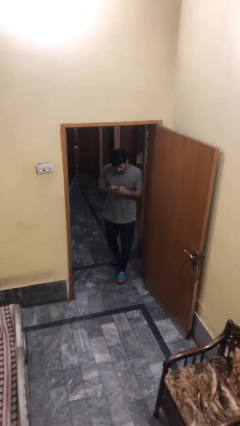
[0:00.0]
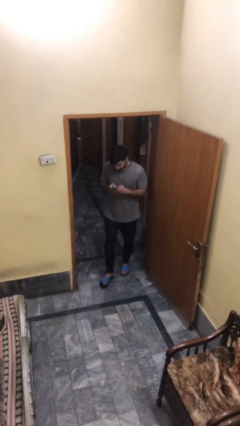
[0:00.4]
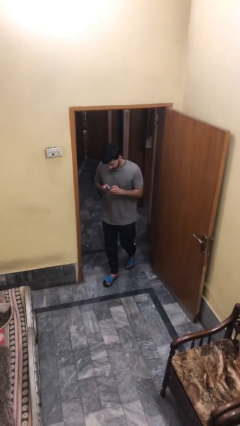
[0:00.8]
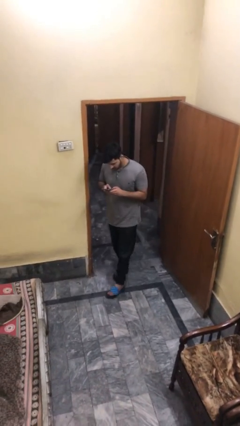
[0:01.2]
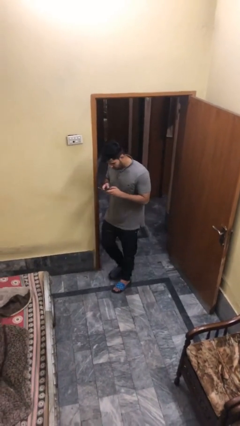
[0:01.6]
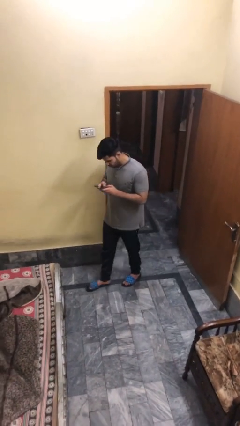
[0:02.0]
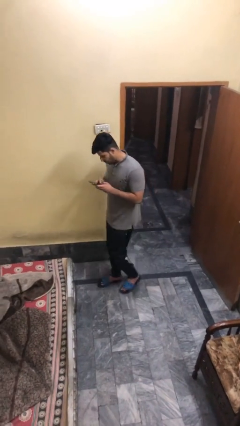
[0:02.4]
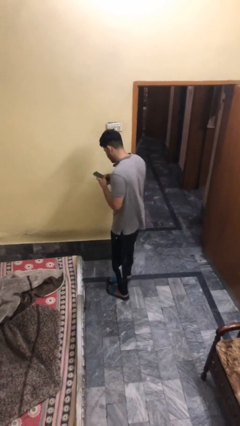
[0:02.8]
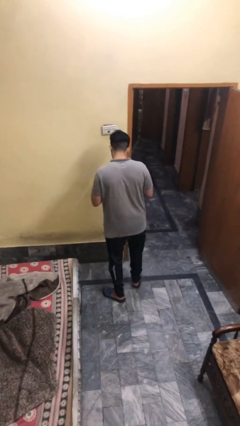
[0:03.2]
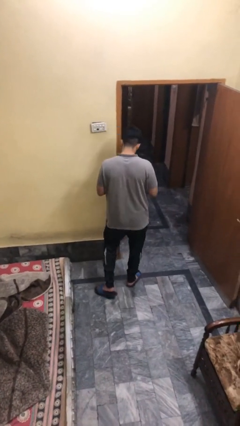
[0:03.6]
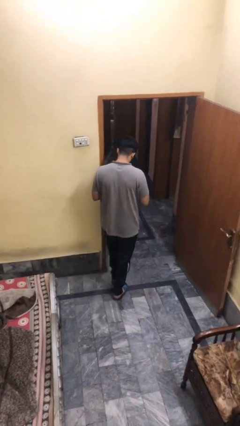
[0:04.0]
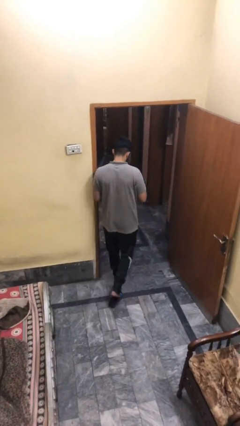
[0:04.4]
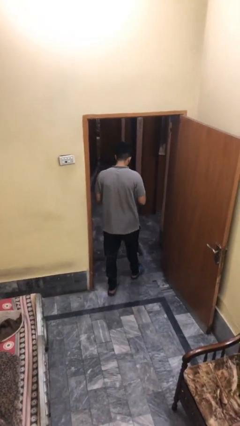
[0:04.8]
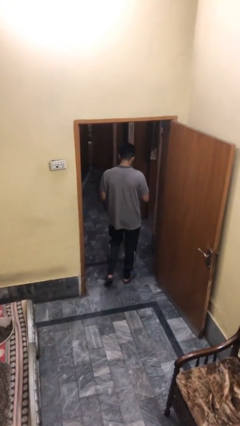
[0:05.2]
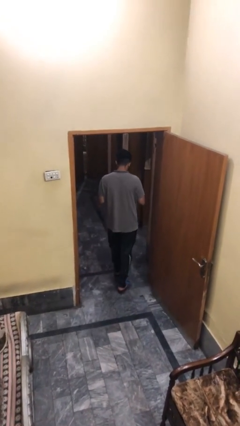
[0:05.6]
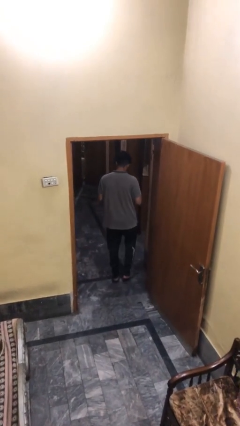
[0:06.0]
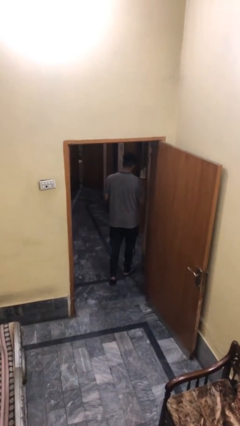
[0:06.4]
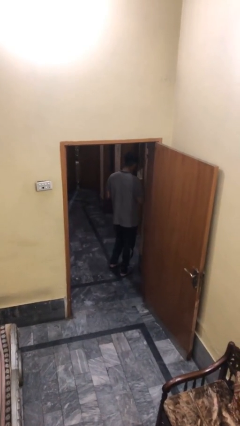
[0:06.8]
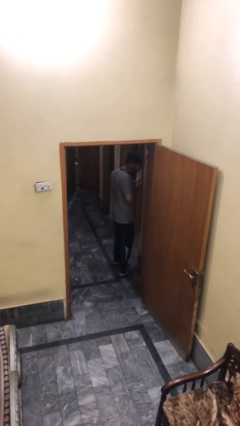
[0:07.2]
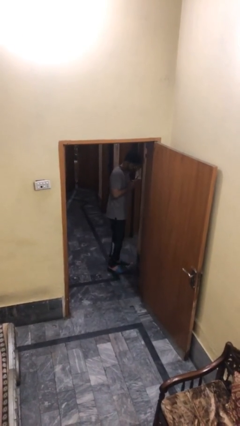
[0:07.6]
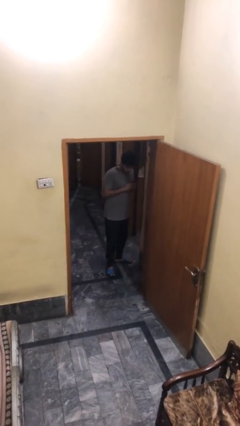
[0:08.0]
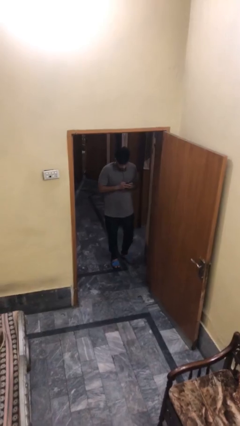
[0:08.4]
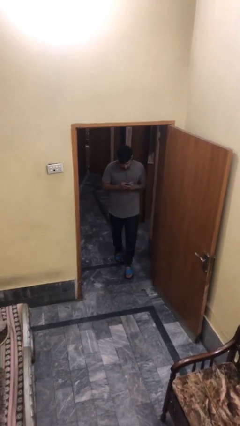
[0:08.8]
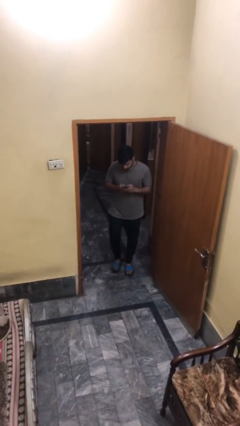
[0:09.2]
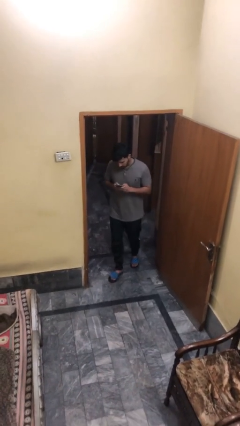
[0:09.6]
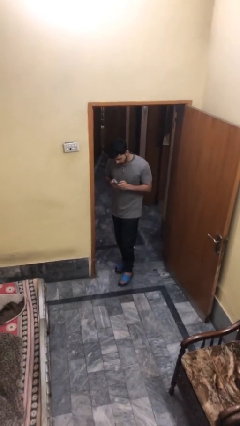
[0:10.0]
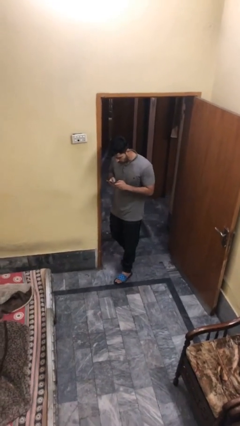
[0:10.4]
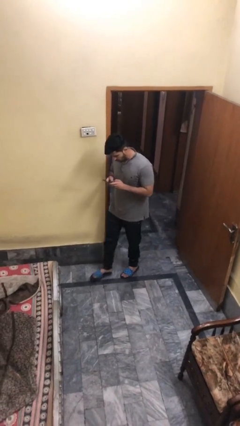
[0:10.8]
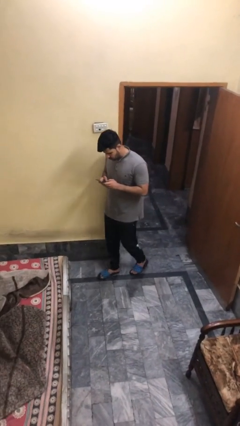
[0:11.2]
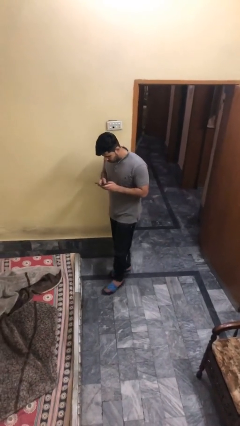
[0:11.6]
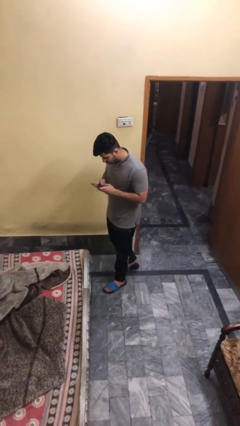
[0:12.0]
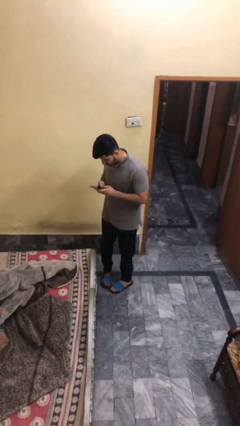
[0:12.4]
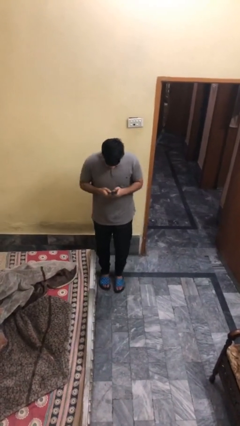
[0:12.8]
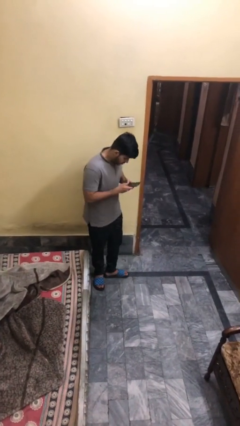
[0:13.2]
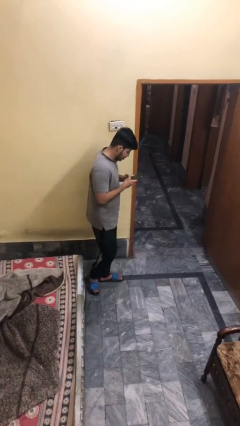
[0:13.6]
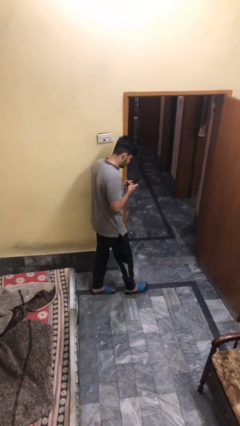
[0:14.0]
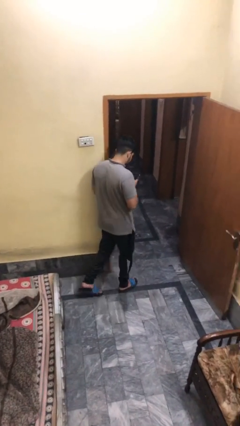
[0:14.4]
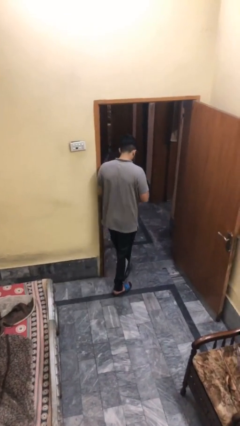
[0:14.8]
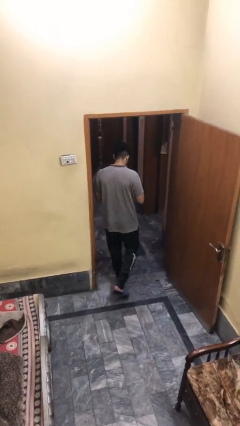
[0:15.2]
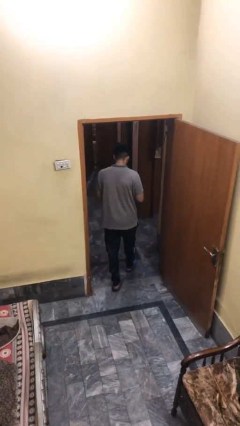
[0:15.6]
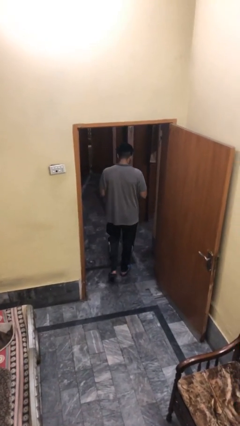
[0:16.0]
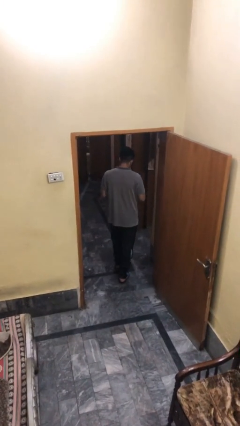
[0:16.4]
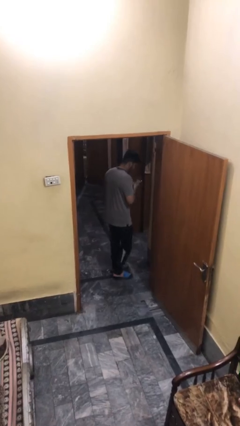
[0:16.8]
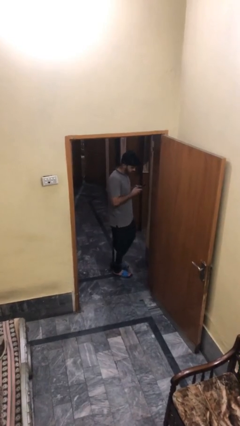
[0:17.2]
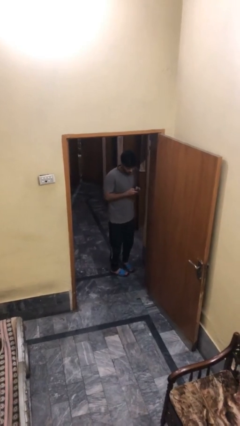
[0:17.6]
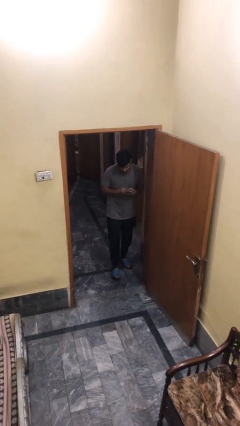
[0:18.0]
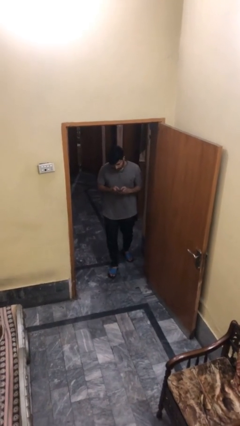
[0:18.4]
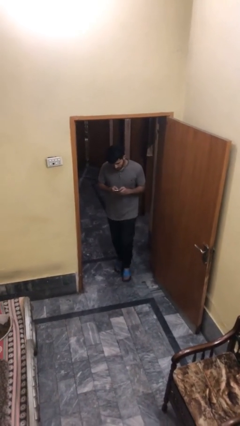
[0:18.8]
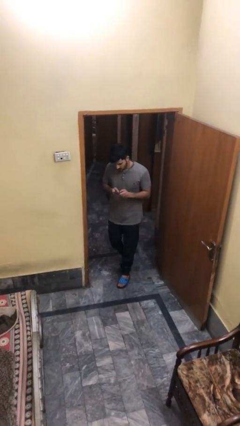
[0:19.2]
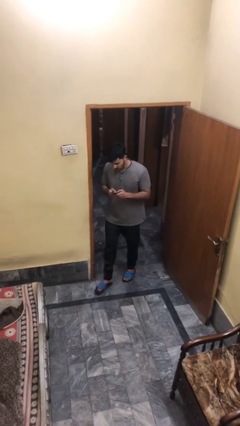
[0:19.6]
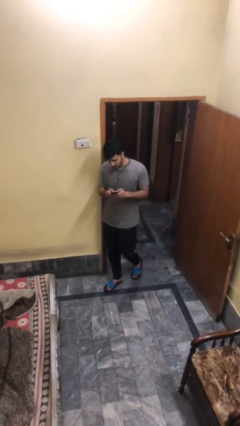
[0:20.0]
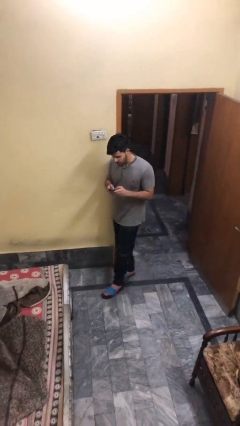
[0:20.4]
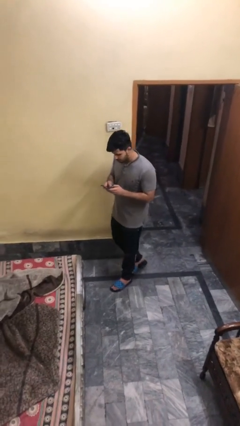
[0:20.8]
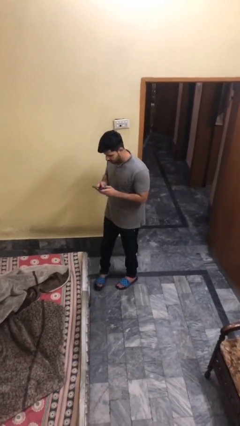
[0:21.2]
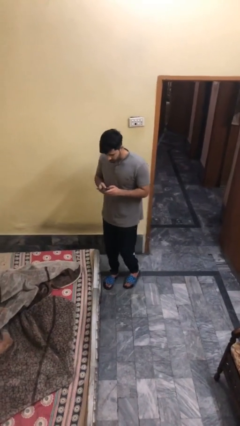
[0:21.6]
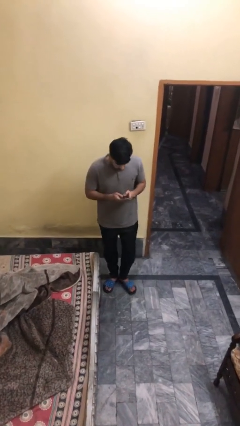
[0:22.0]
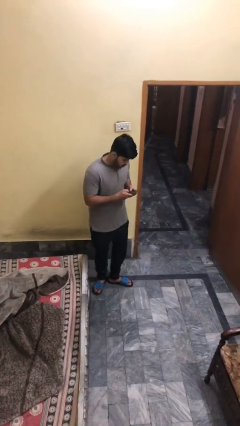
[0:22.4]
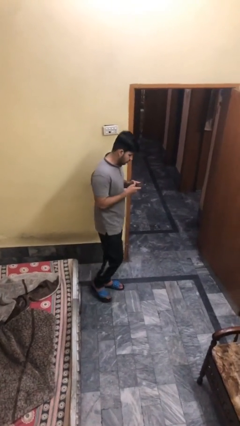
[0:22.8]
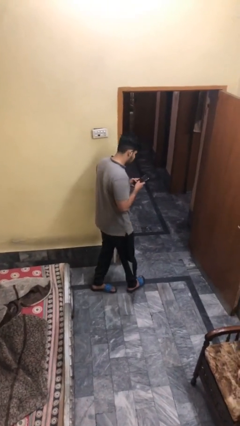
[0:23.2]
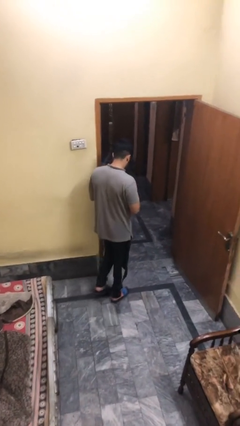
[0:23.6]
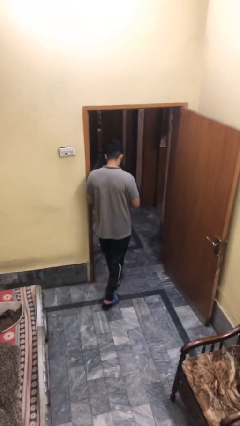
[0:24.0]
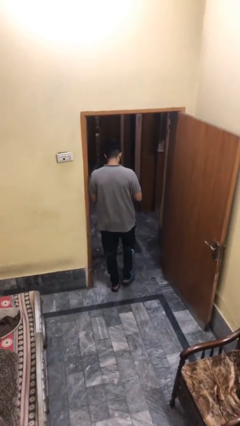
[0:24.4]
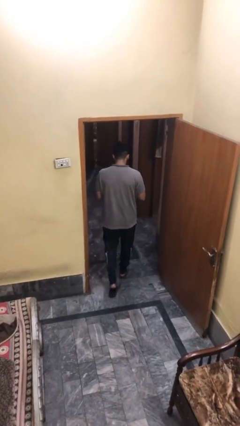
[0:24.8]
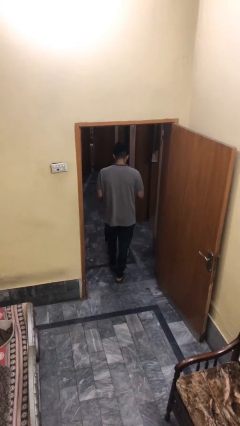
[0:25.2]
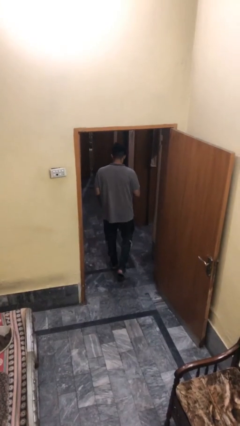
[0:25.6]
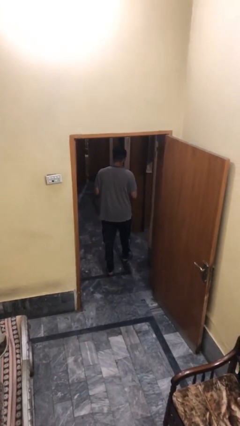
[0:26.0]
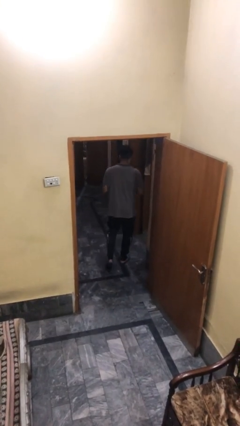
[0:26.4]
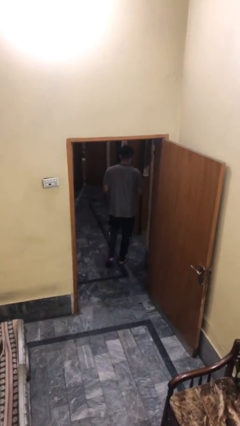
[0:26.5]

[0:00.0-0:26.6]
person texts on phone

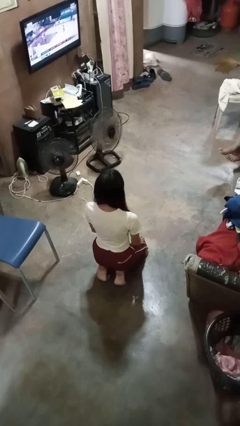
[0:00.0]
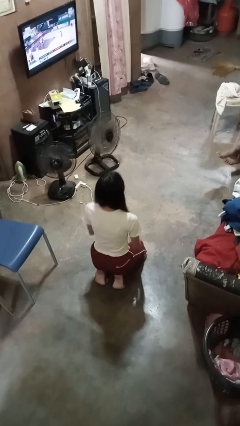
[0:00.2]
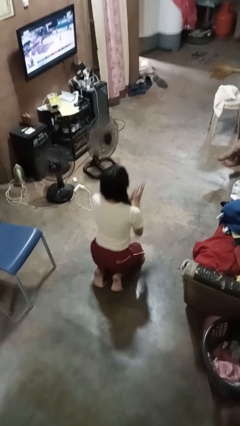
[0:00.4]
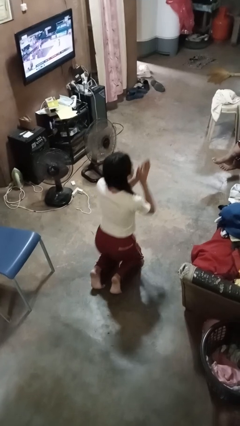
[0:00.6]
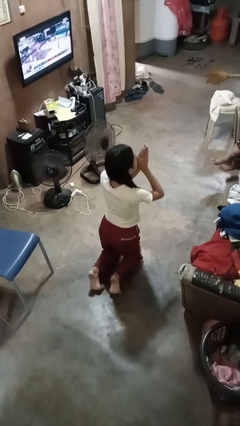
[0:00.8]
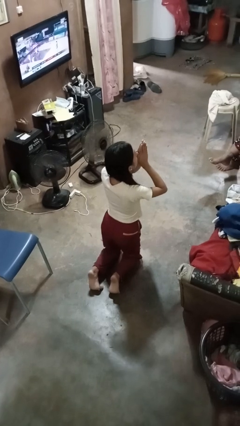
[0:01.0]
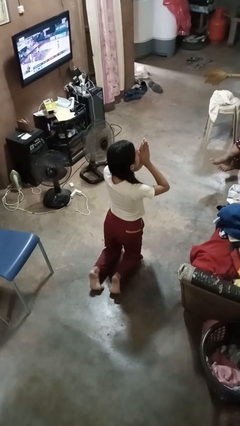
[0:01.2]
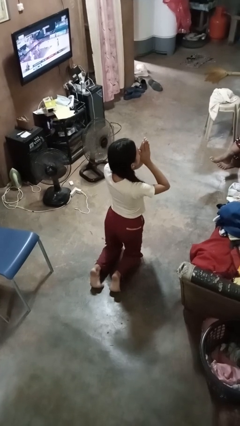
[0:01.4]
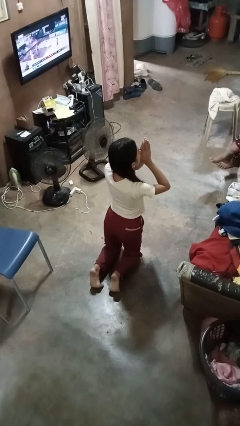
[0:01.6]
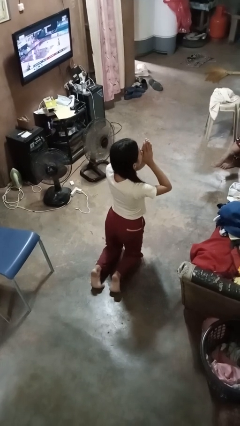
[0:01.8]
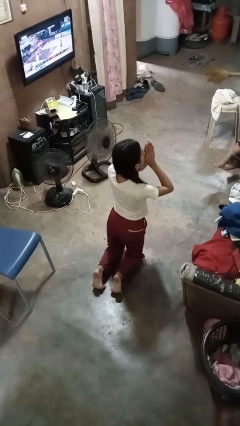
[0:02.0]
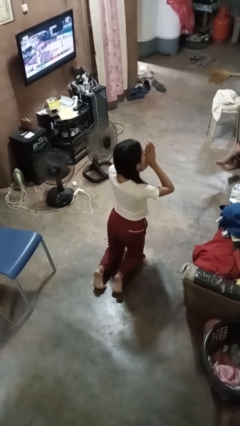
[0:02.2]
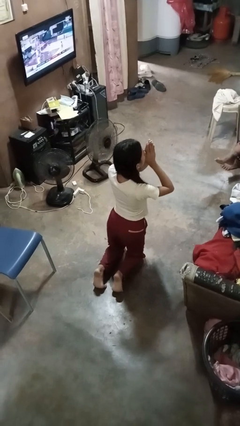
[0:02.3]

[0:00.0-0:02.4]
person prays

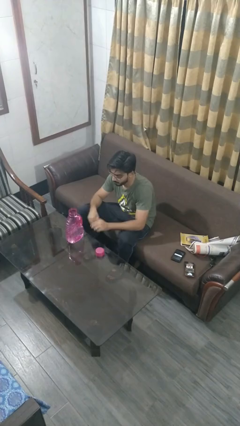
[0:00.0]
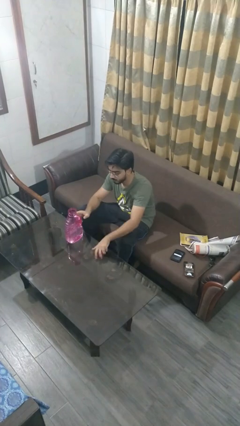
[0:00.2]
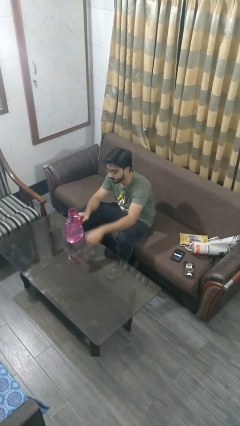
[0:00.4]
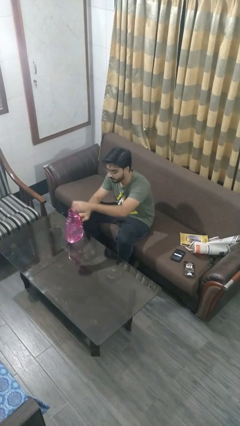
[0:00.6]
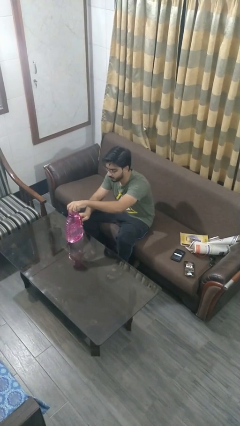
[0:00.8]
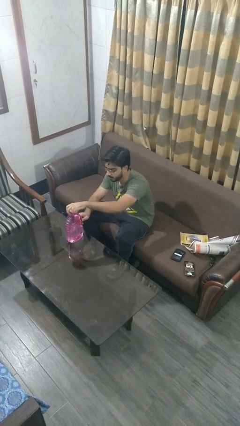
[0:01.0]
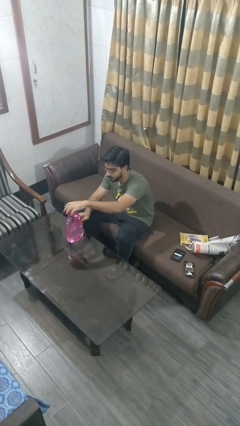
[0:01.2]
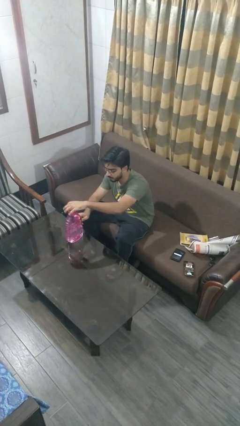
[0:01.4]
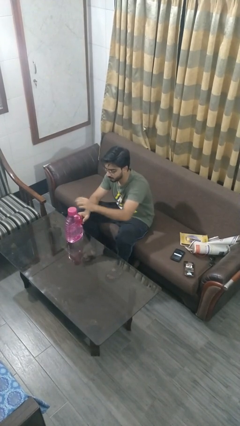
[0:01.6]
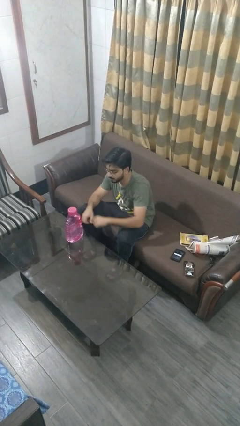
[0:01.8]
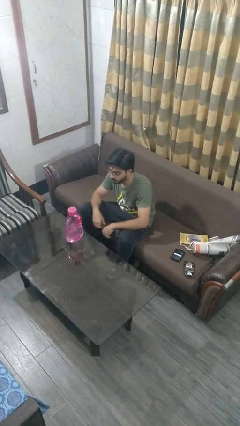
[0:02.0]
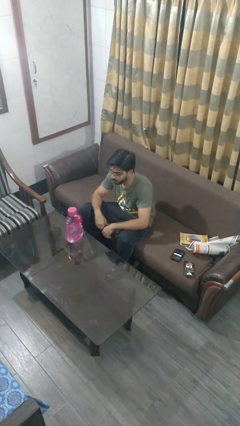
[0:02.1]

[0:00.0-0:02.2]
person screws lid to bottle
